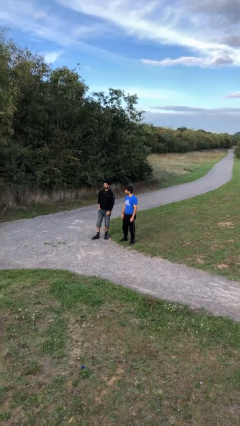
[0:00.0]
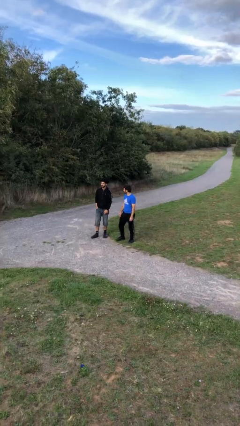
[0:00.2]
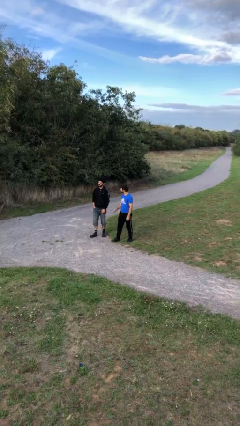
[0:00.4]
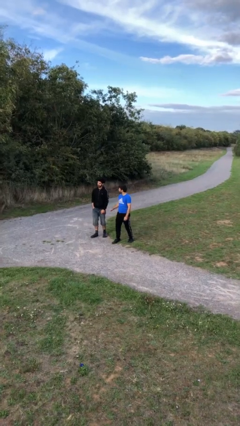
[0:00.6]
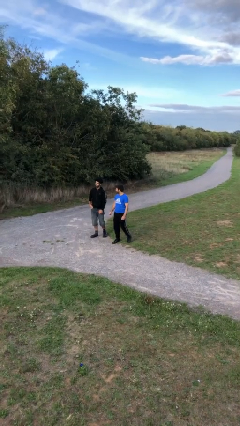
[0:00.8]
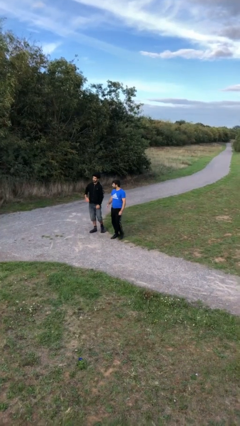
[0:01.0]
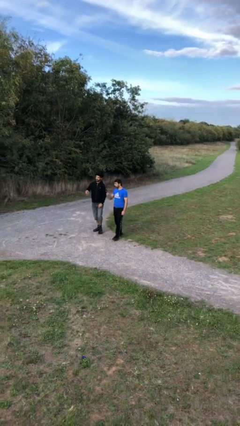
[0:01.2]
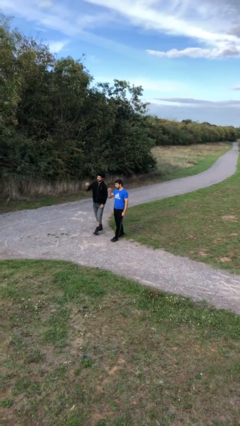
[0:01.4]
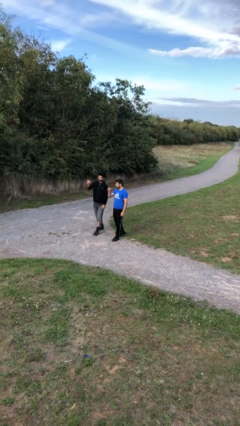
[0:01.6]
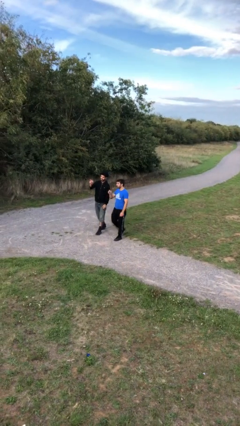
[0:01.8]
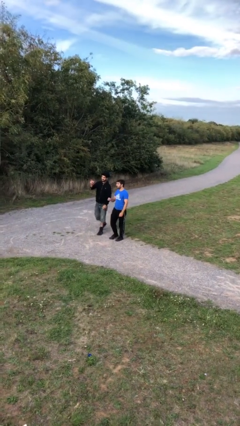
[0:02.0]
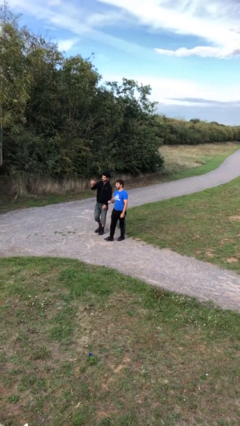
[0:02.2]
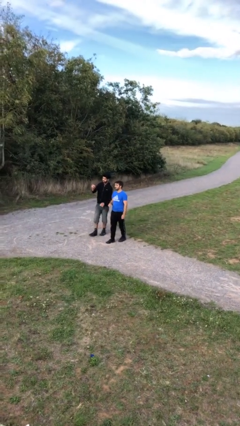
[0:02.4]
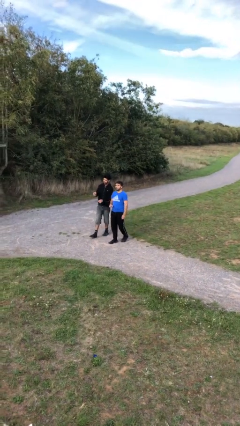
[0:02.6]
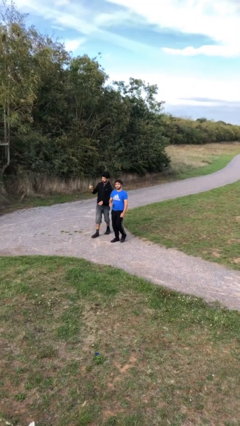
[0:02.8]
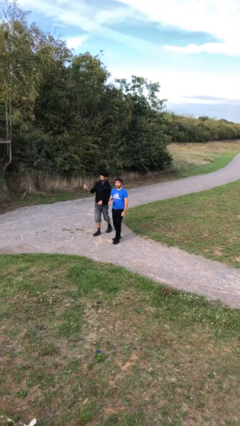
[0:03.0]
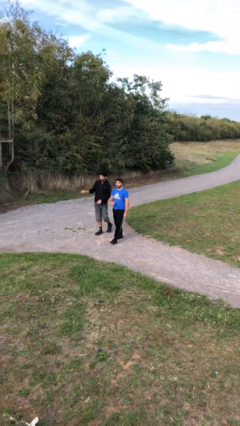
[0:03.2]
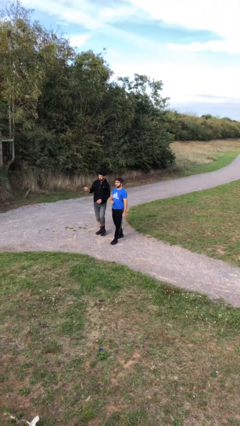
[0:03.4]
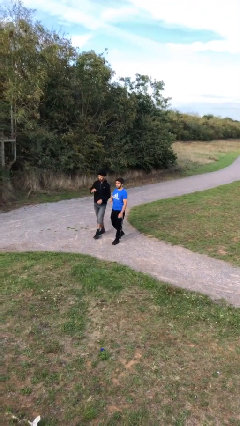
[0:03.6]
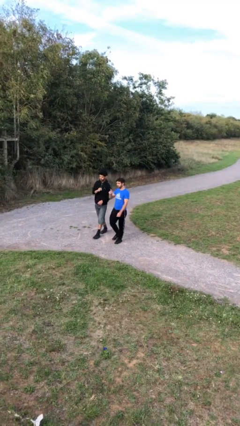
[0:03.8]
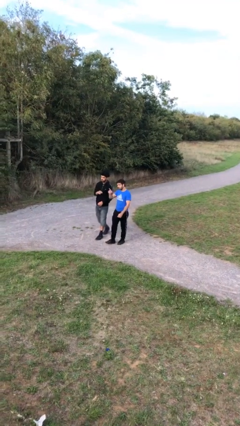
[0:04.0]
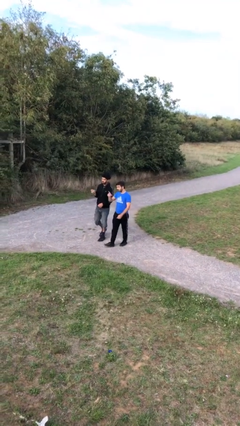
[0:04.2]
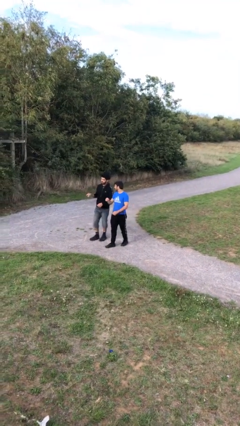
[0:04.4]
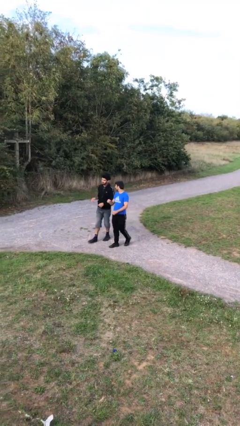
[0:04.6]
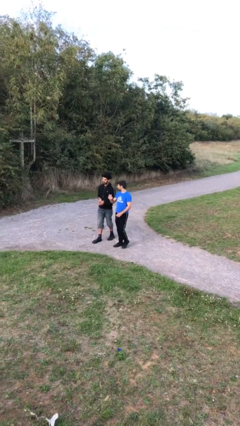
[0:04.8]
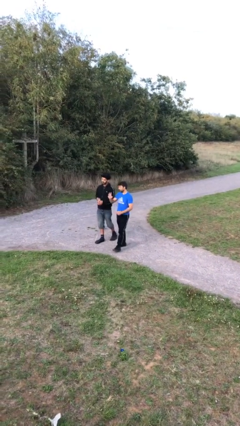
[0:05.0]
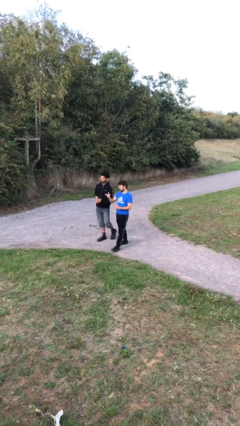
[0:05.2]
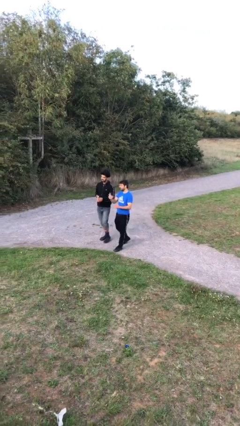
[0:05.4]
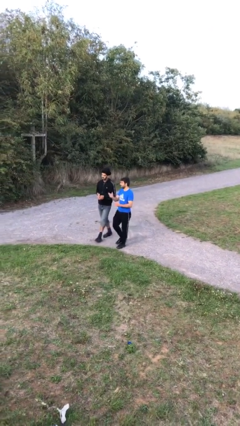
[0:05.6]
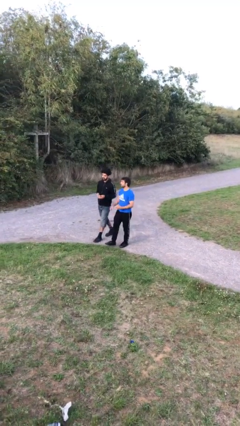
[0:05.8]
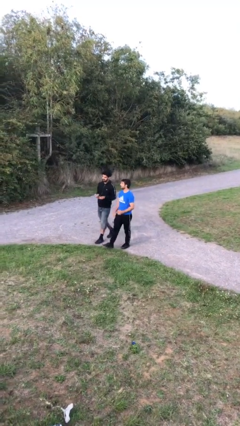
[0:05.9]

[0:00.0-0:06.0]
person talks to person

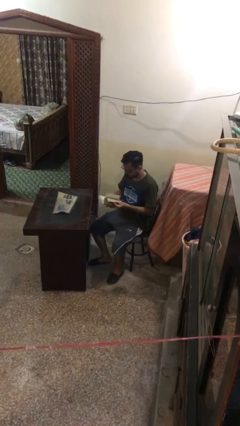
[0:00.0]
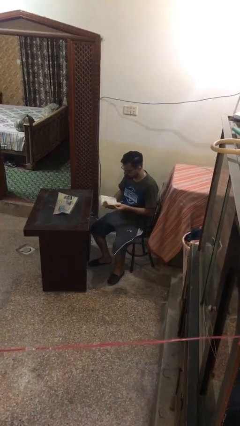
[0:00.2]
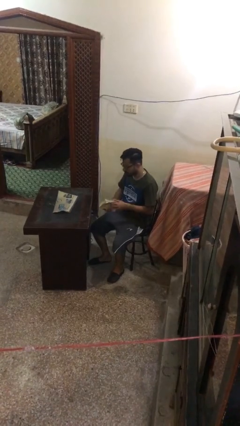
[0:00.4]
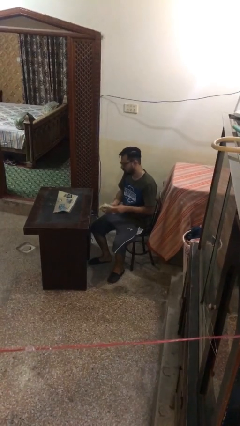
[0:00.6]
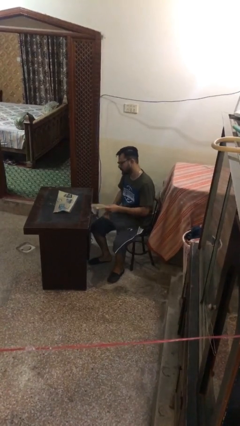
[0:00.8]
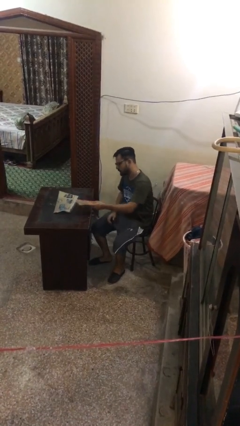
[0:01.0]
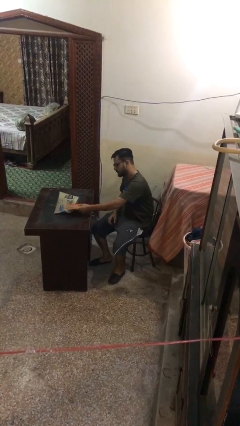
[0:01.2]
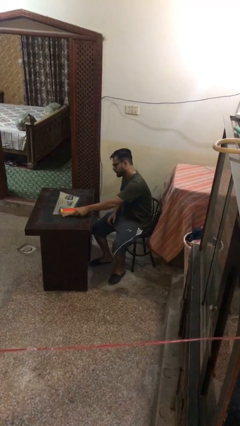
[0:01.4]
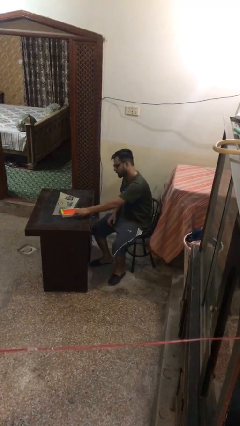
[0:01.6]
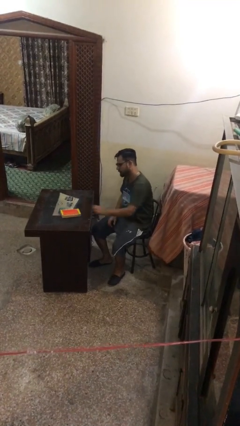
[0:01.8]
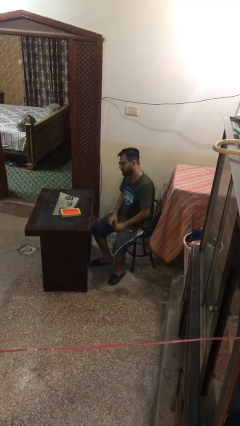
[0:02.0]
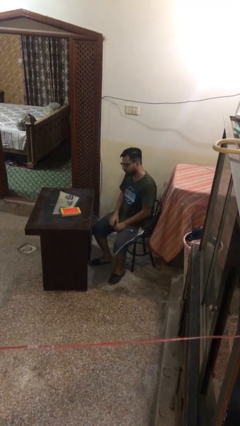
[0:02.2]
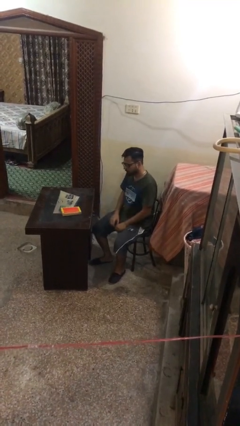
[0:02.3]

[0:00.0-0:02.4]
person puts down object on table

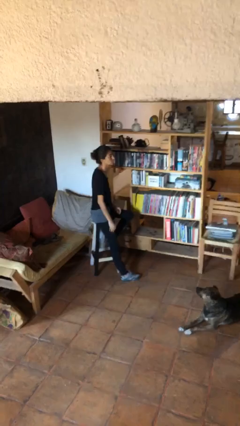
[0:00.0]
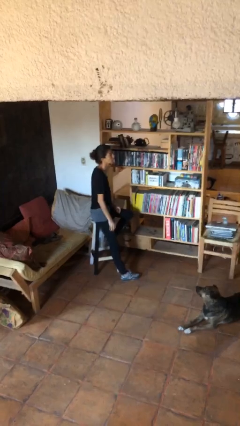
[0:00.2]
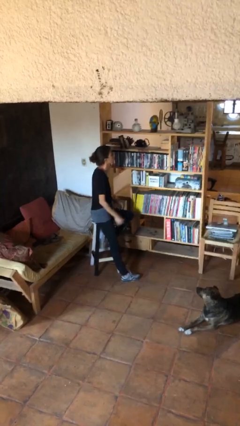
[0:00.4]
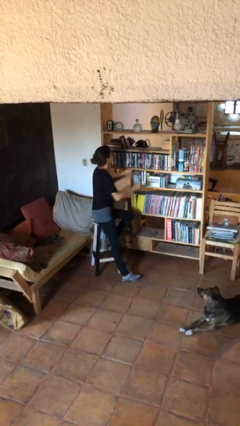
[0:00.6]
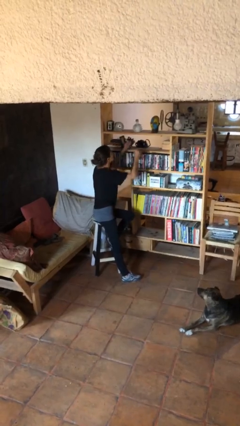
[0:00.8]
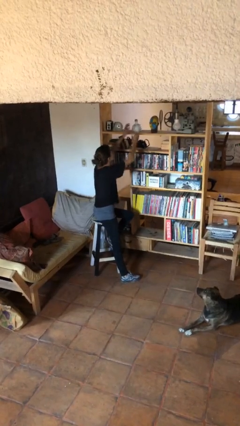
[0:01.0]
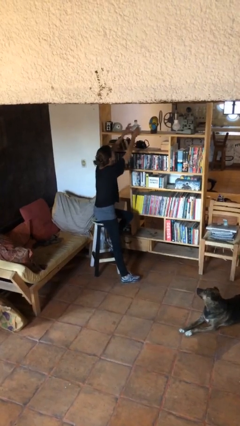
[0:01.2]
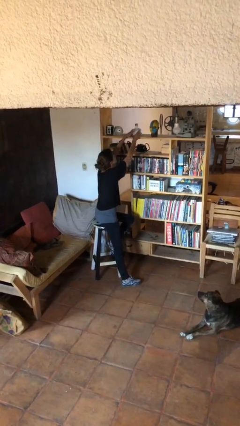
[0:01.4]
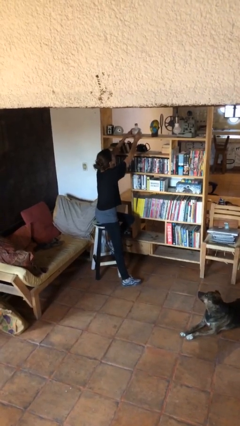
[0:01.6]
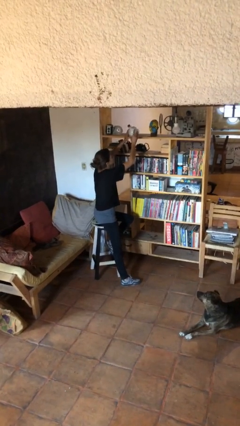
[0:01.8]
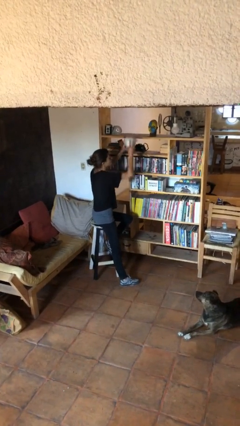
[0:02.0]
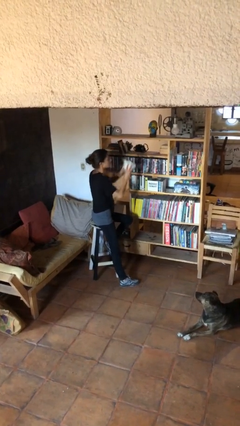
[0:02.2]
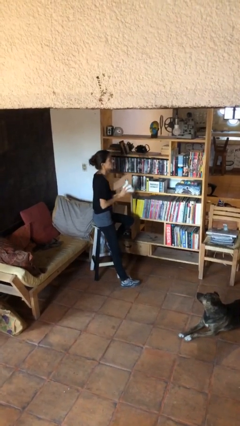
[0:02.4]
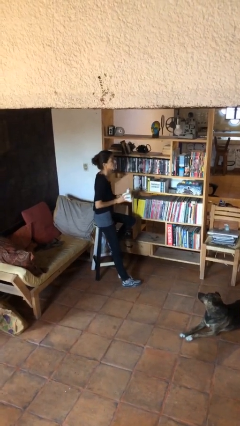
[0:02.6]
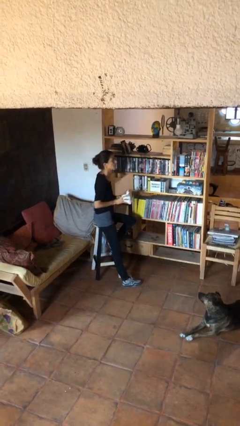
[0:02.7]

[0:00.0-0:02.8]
person picks up object from countertop

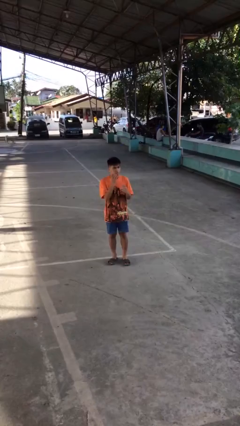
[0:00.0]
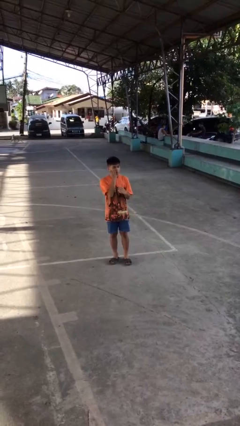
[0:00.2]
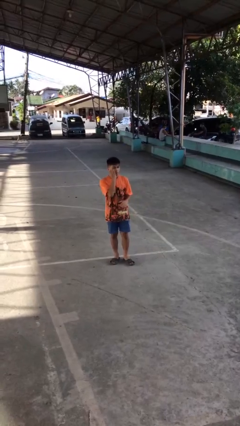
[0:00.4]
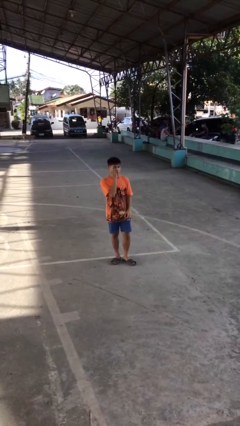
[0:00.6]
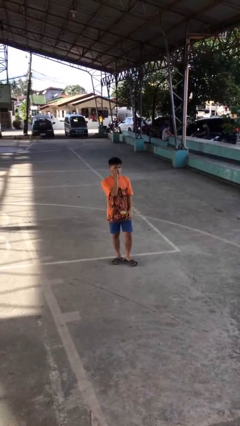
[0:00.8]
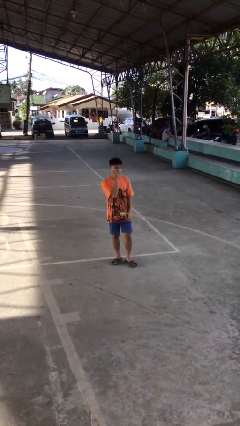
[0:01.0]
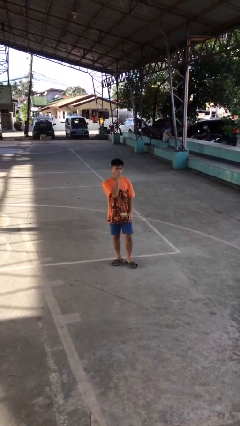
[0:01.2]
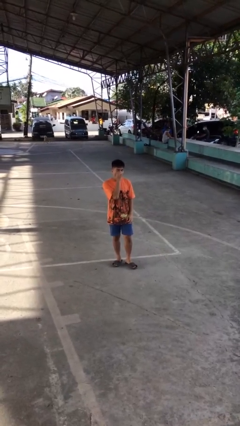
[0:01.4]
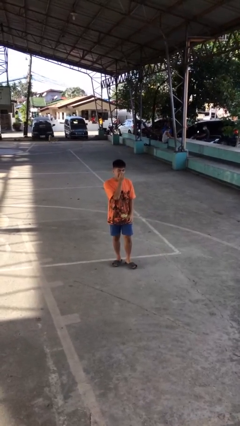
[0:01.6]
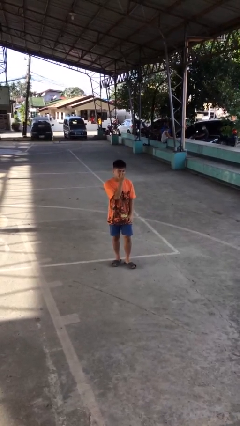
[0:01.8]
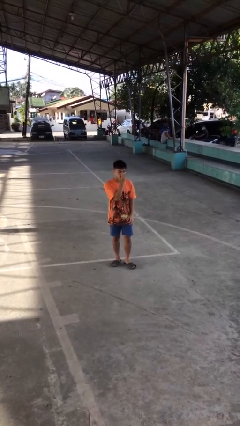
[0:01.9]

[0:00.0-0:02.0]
person scratches face

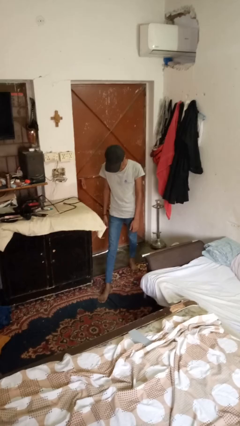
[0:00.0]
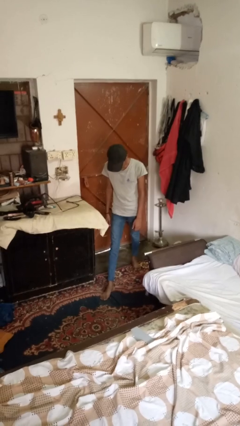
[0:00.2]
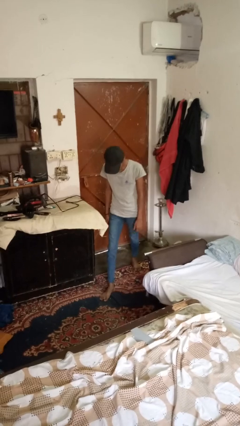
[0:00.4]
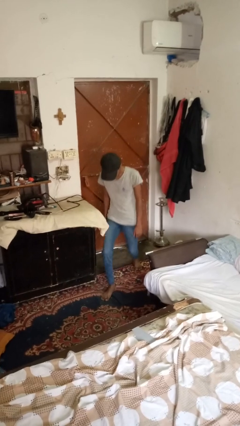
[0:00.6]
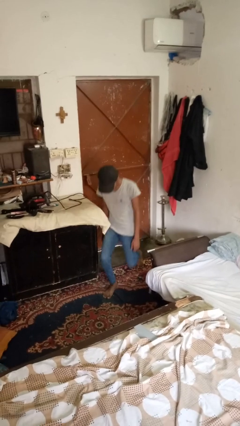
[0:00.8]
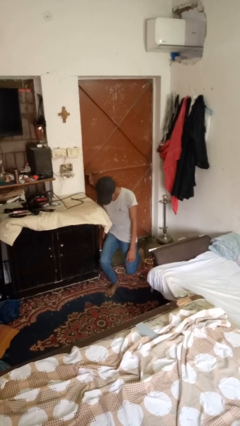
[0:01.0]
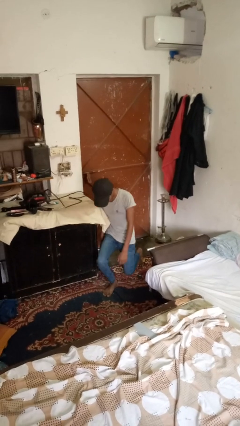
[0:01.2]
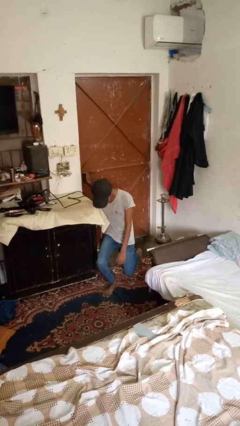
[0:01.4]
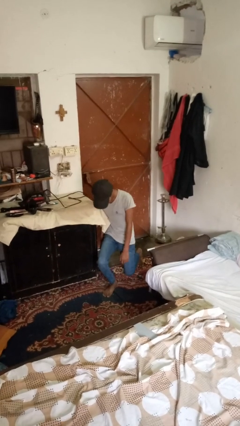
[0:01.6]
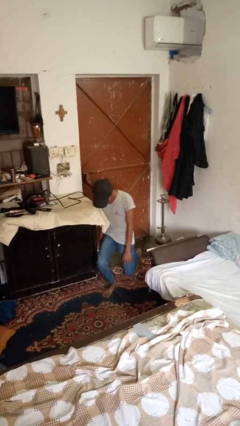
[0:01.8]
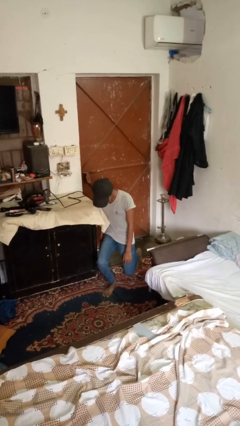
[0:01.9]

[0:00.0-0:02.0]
person exercises with lunges

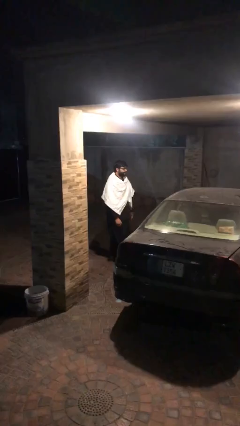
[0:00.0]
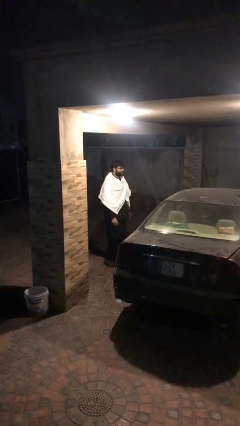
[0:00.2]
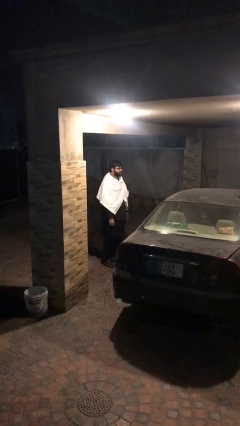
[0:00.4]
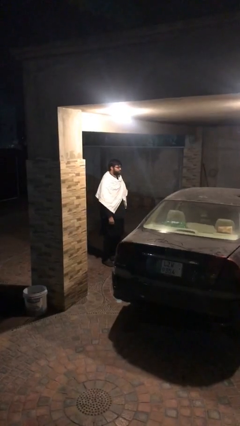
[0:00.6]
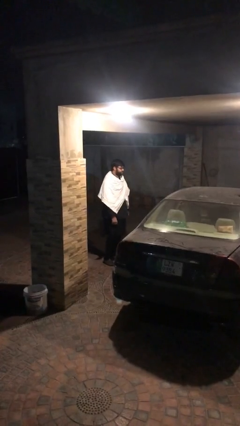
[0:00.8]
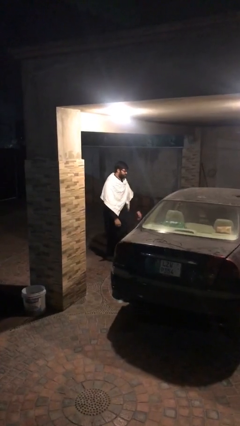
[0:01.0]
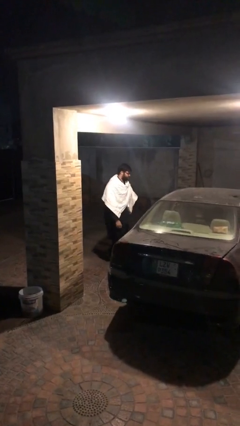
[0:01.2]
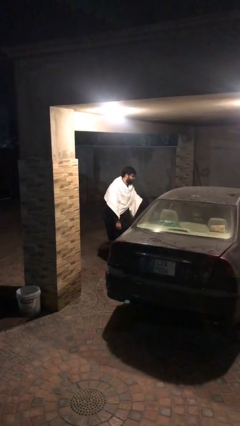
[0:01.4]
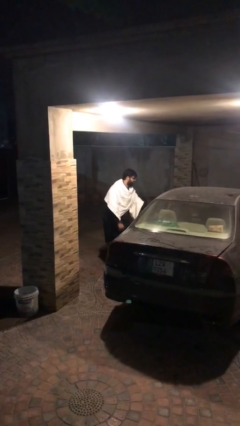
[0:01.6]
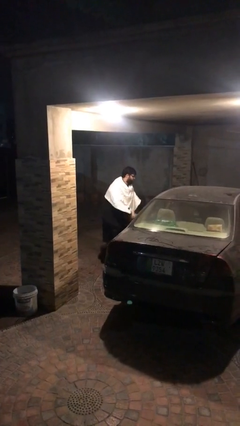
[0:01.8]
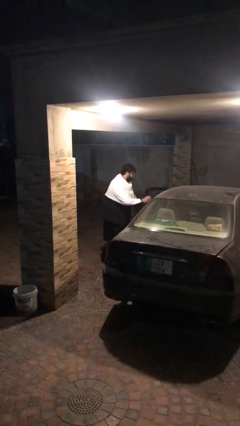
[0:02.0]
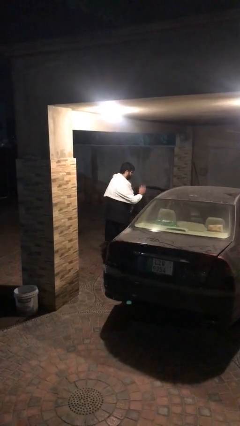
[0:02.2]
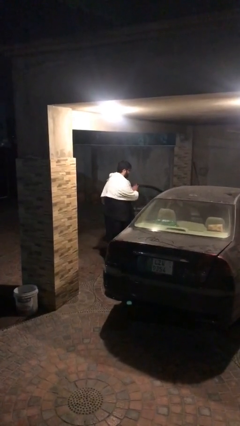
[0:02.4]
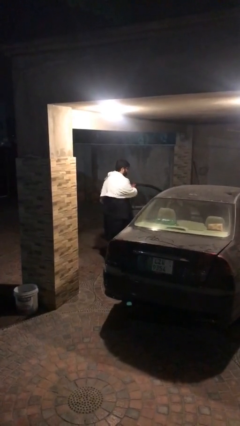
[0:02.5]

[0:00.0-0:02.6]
person opens car door
